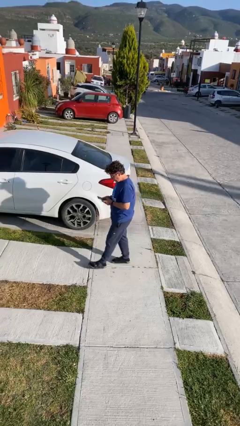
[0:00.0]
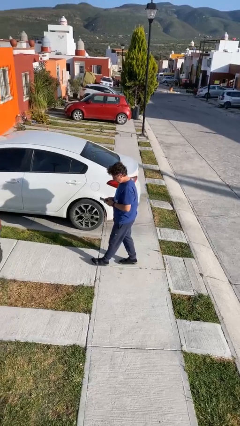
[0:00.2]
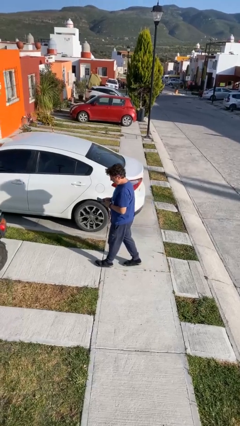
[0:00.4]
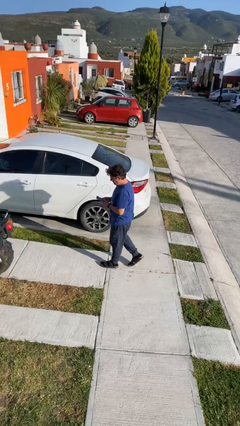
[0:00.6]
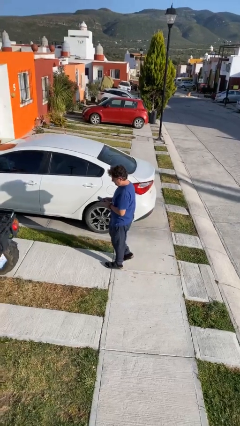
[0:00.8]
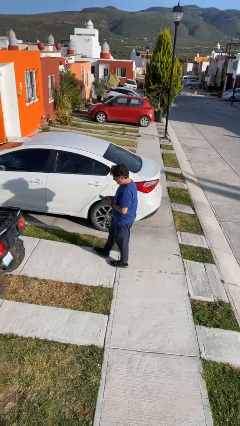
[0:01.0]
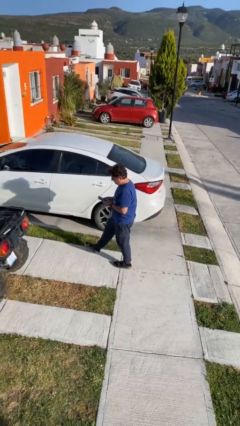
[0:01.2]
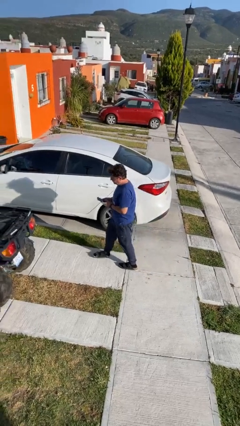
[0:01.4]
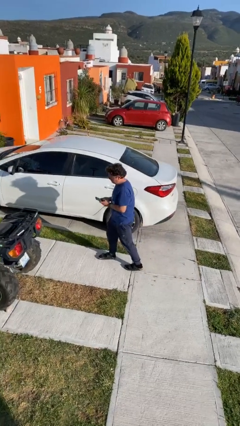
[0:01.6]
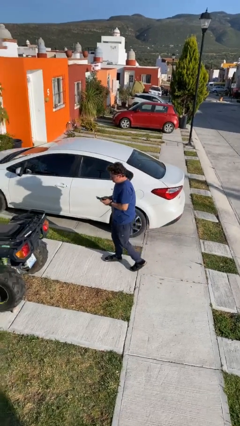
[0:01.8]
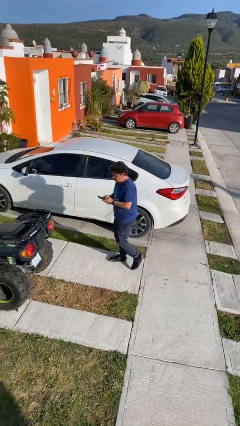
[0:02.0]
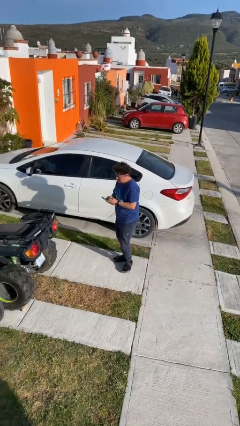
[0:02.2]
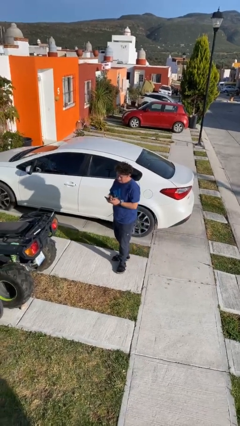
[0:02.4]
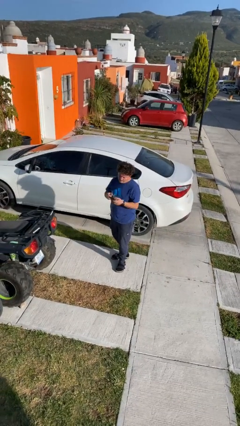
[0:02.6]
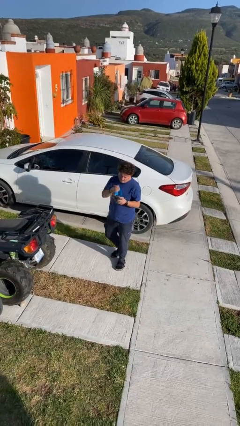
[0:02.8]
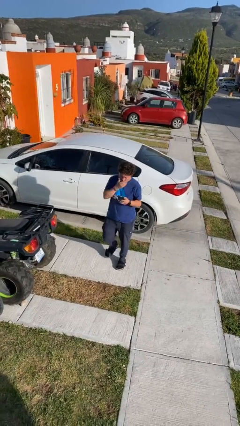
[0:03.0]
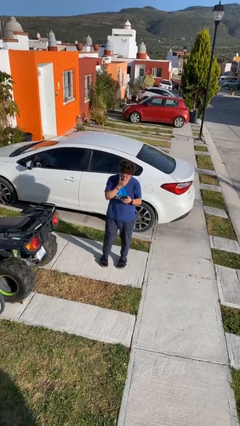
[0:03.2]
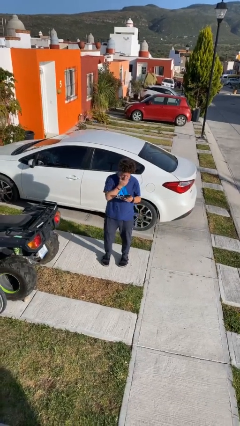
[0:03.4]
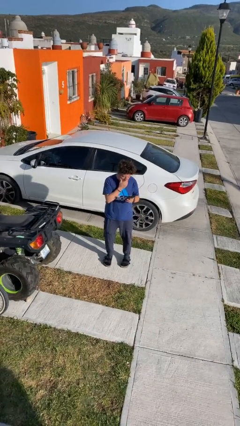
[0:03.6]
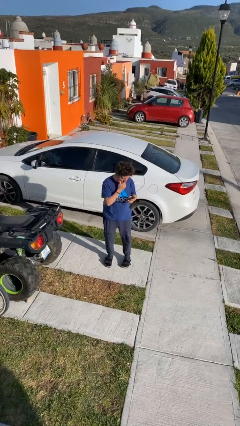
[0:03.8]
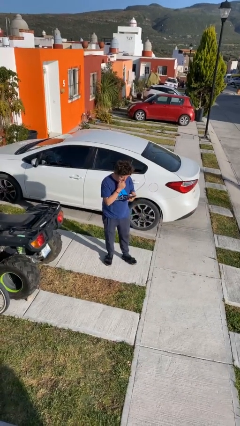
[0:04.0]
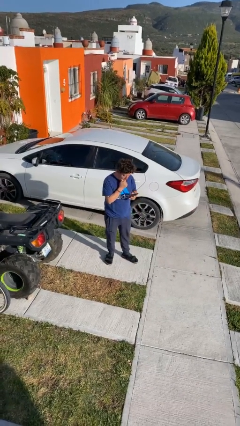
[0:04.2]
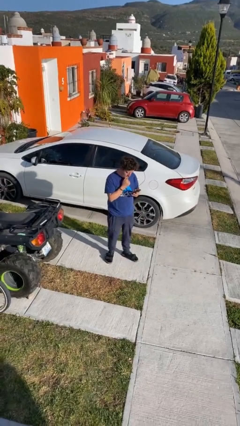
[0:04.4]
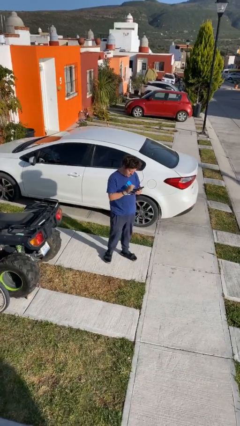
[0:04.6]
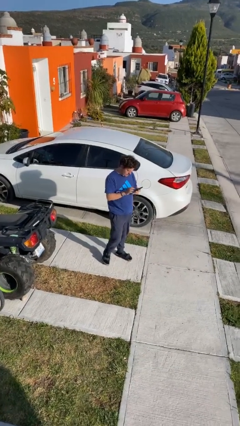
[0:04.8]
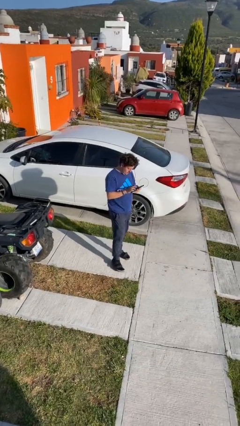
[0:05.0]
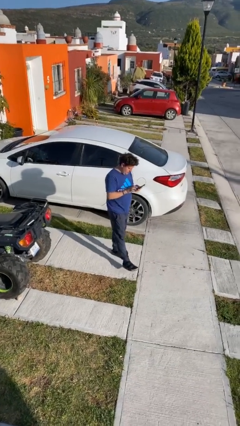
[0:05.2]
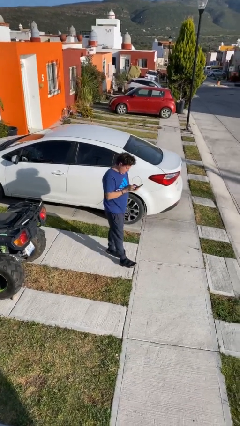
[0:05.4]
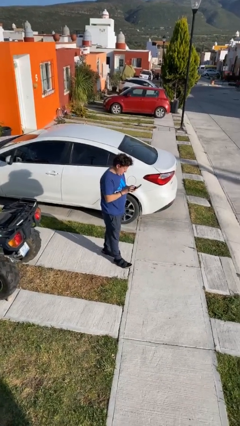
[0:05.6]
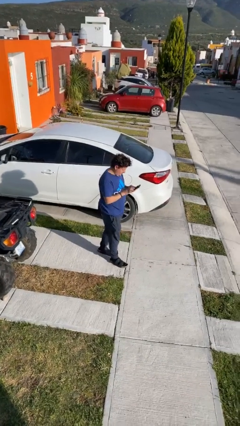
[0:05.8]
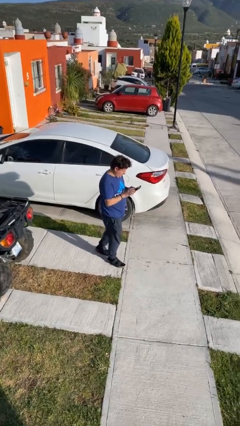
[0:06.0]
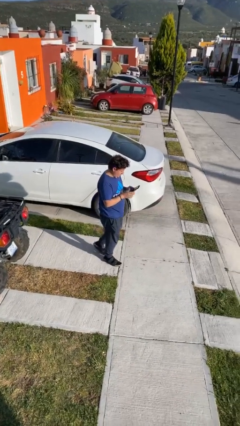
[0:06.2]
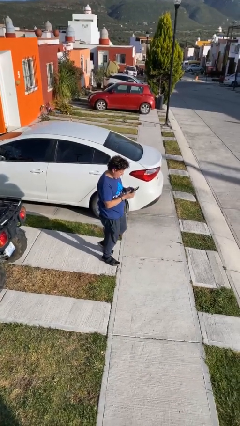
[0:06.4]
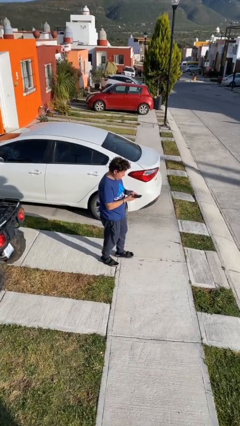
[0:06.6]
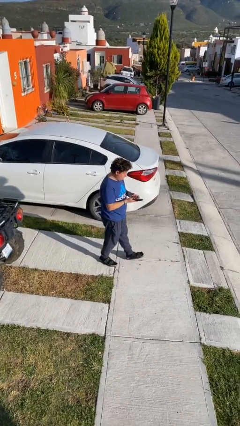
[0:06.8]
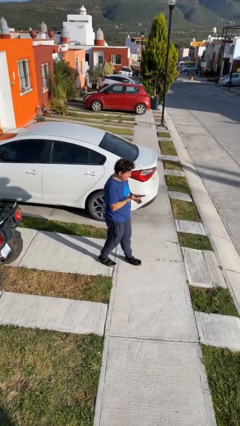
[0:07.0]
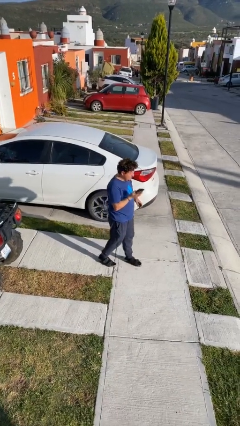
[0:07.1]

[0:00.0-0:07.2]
person texts on phone

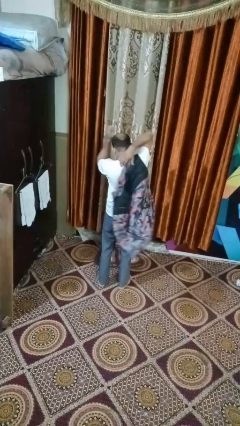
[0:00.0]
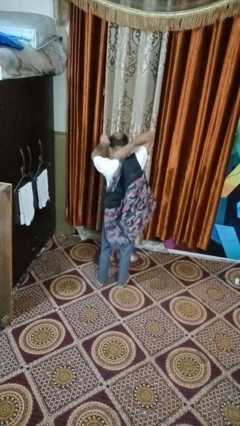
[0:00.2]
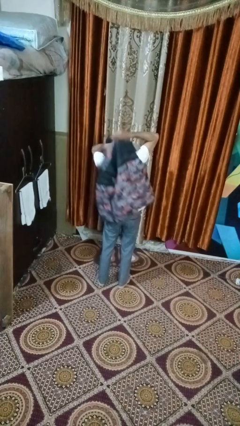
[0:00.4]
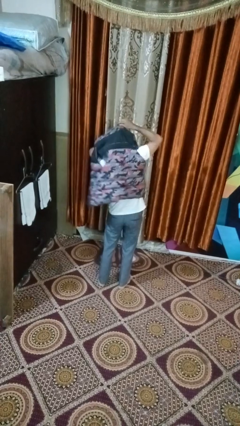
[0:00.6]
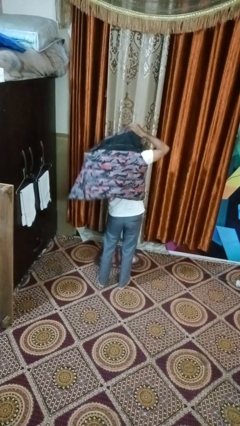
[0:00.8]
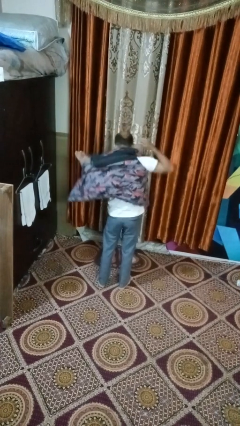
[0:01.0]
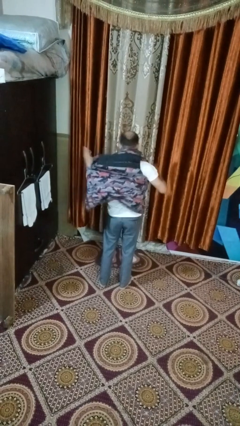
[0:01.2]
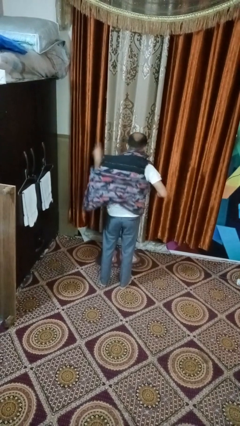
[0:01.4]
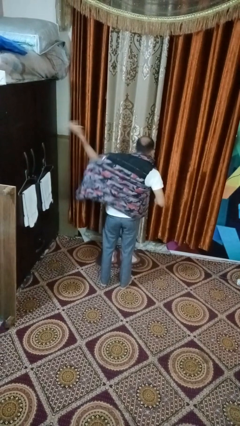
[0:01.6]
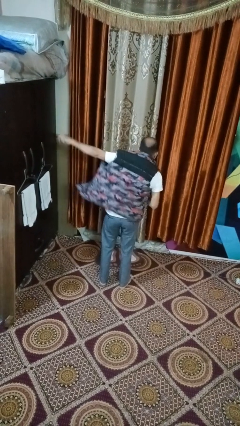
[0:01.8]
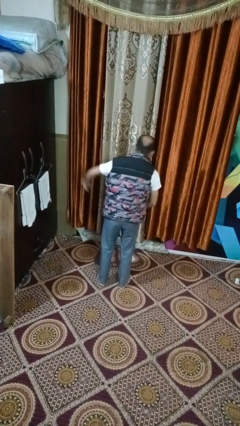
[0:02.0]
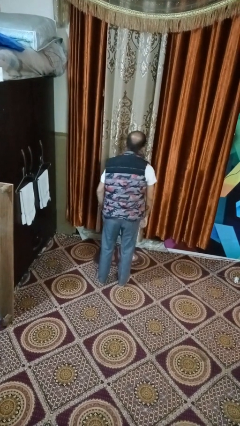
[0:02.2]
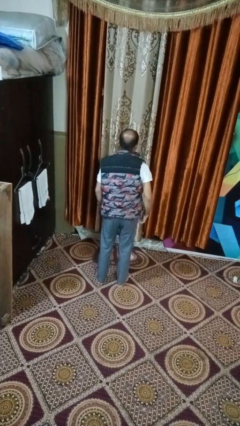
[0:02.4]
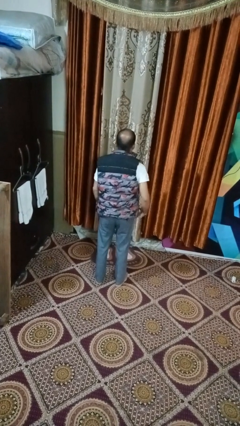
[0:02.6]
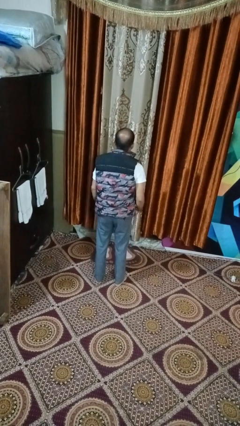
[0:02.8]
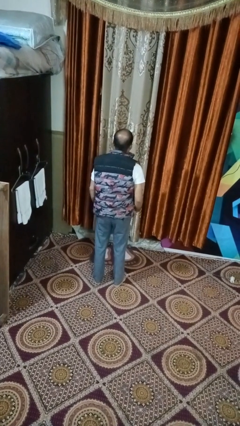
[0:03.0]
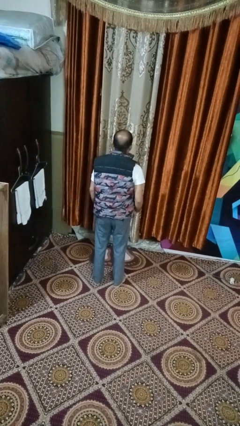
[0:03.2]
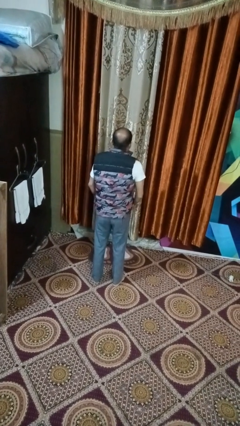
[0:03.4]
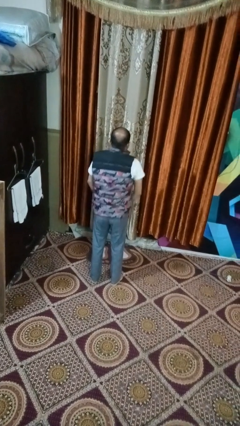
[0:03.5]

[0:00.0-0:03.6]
person puts on jacket

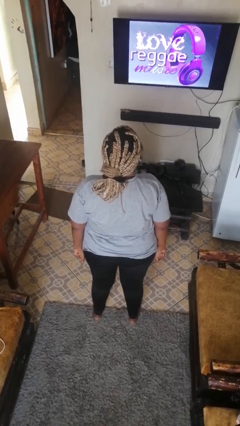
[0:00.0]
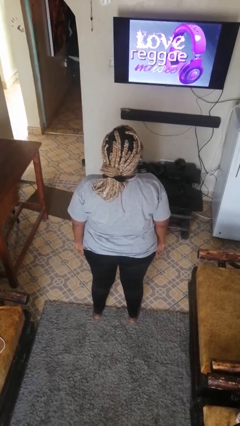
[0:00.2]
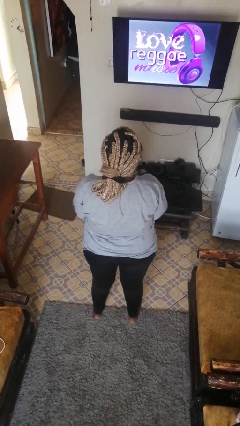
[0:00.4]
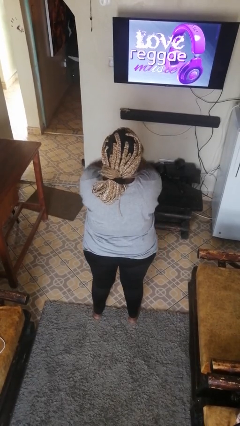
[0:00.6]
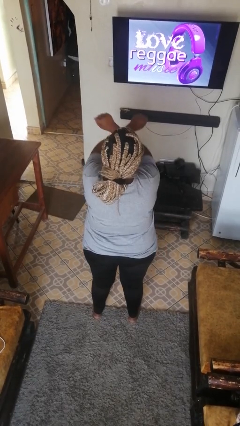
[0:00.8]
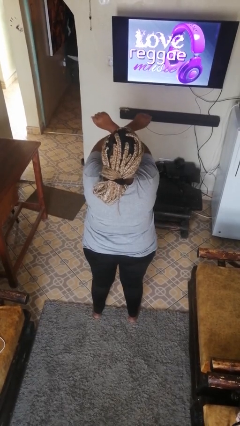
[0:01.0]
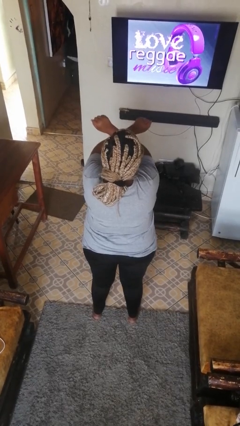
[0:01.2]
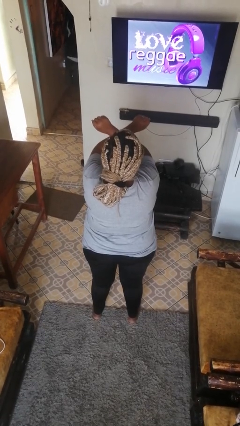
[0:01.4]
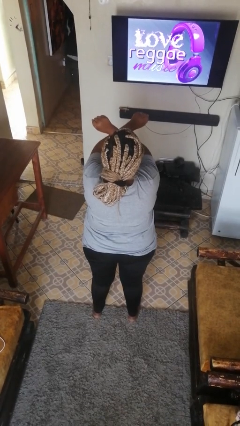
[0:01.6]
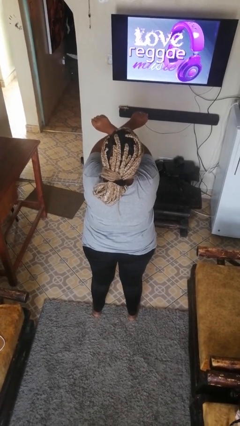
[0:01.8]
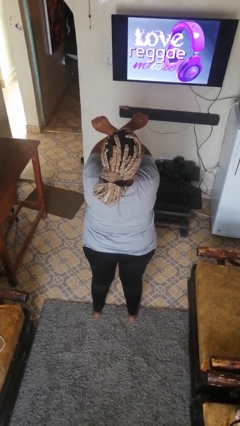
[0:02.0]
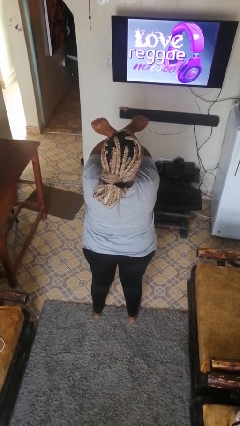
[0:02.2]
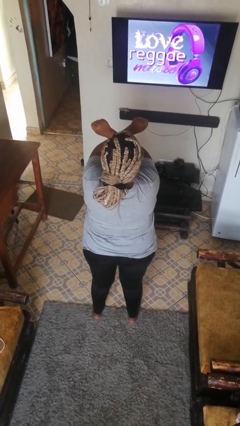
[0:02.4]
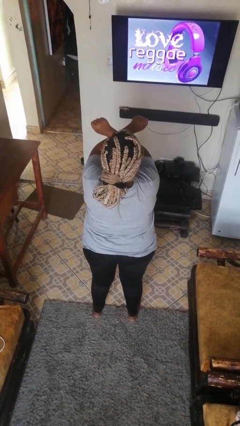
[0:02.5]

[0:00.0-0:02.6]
person gestures arms x

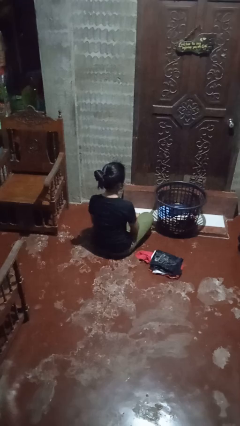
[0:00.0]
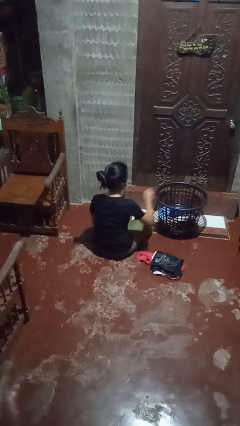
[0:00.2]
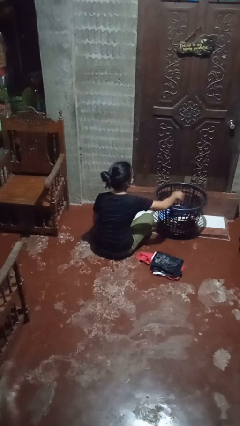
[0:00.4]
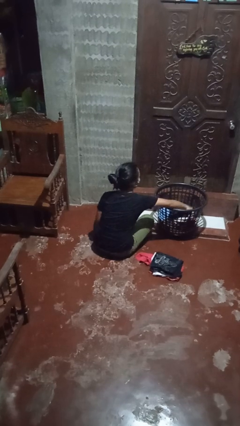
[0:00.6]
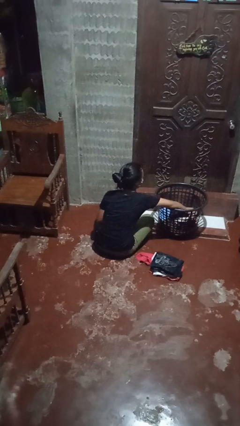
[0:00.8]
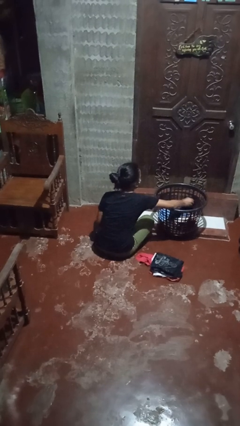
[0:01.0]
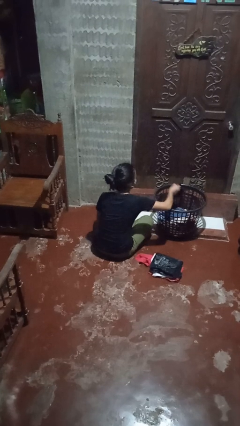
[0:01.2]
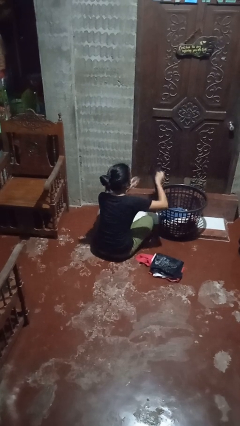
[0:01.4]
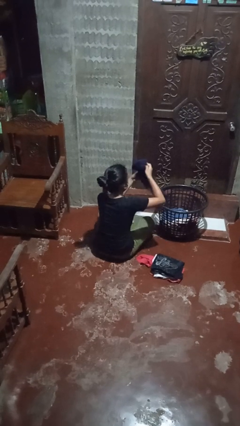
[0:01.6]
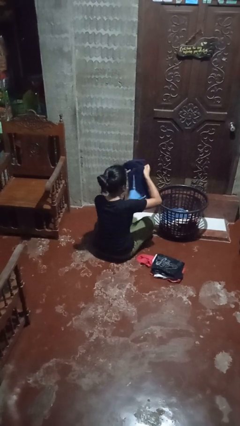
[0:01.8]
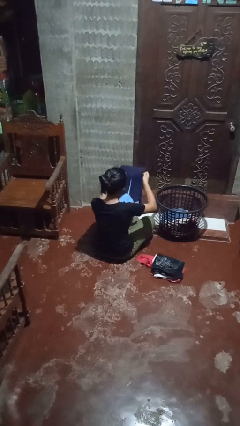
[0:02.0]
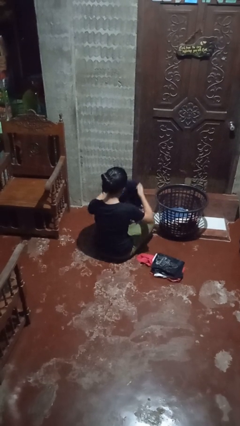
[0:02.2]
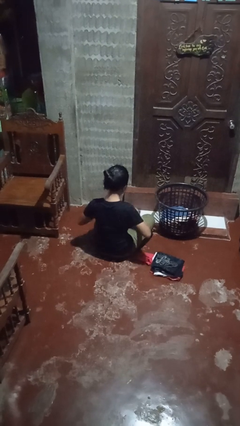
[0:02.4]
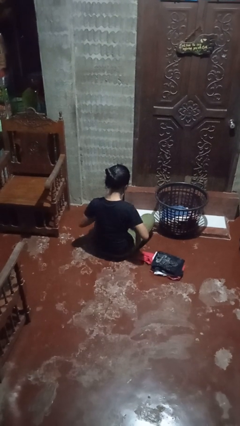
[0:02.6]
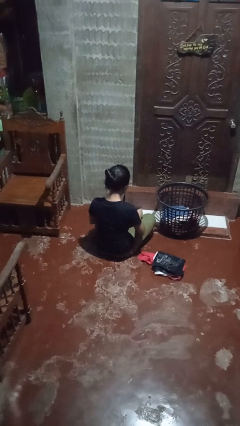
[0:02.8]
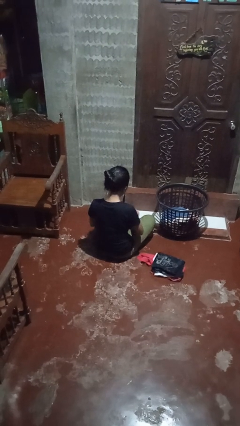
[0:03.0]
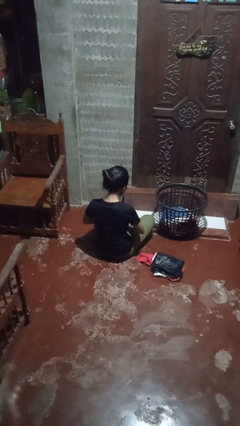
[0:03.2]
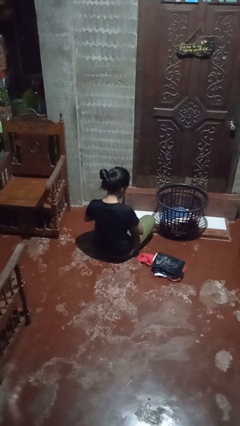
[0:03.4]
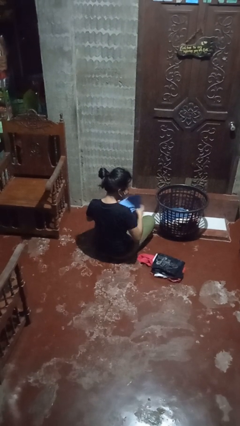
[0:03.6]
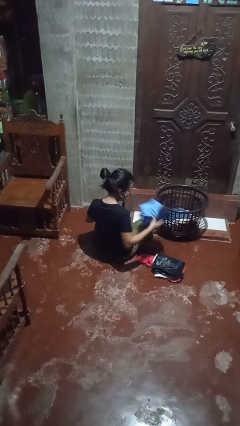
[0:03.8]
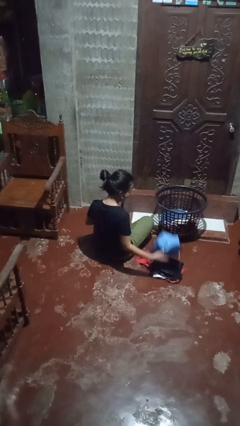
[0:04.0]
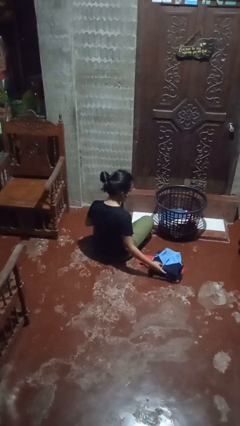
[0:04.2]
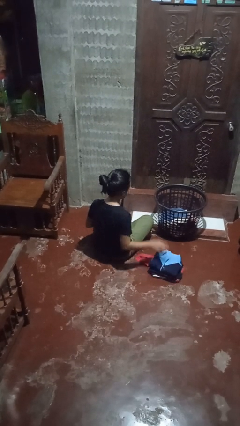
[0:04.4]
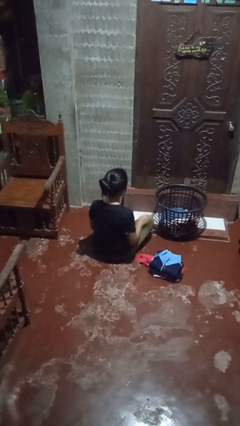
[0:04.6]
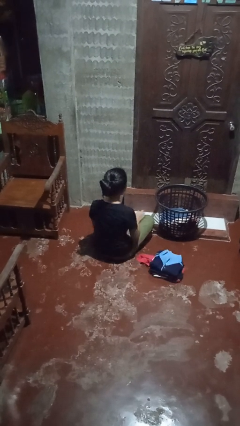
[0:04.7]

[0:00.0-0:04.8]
person folds shirt
